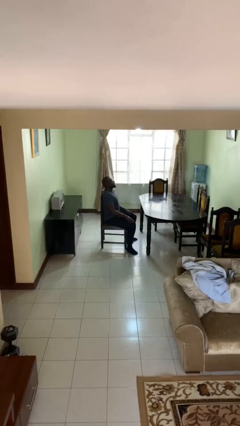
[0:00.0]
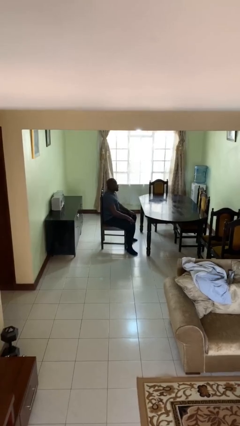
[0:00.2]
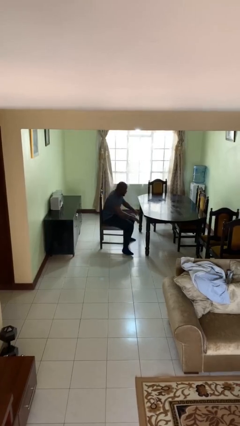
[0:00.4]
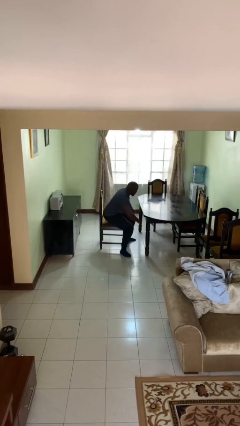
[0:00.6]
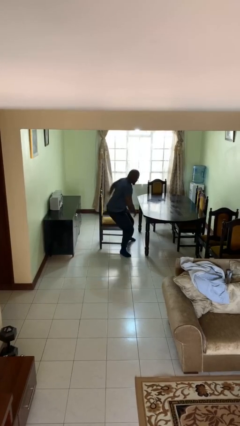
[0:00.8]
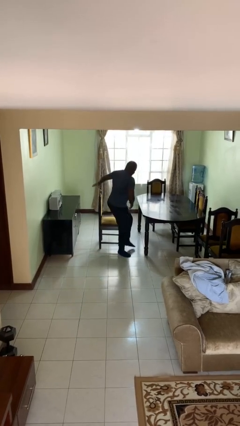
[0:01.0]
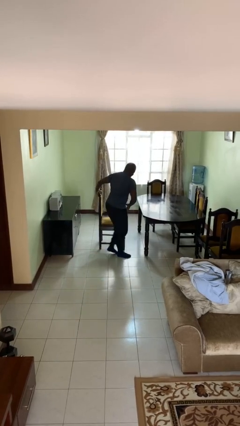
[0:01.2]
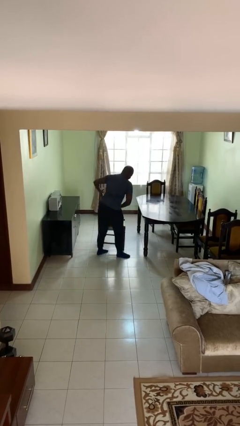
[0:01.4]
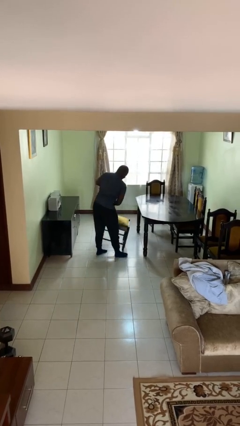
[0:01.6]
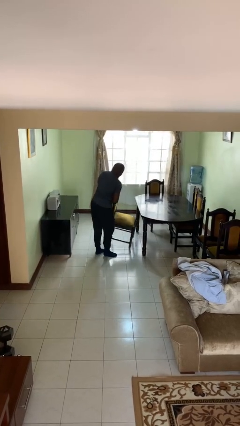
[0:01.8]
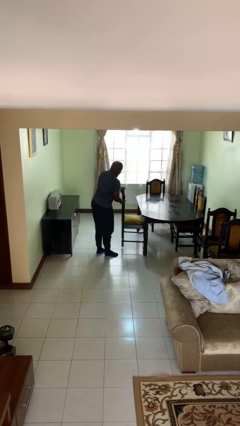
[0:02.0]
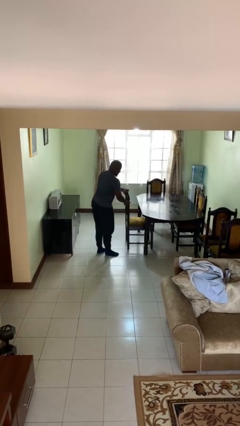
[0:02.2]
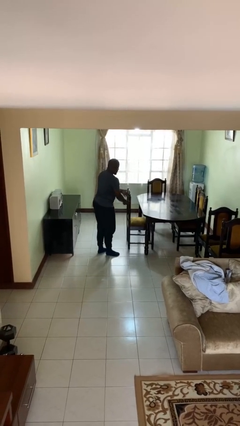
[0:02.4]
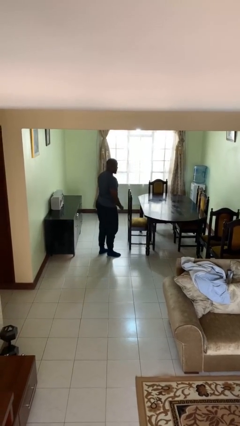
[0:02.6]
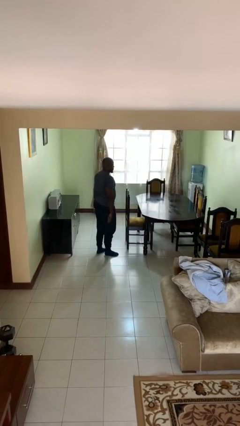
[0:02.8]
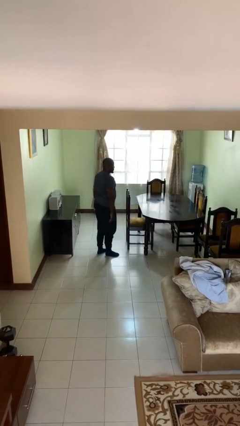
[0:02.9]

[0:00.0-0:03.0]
person stands up

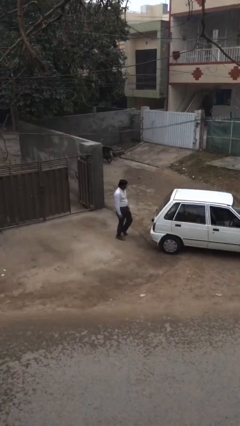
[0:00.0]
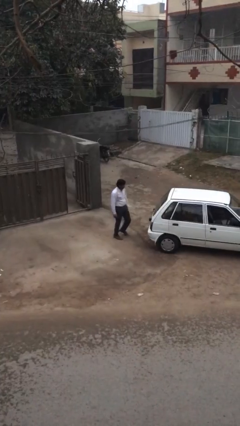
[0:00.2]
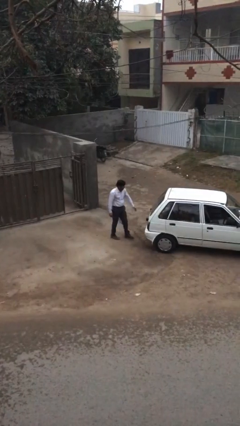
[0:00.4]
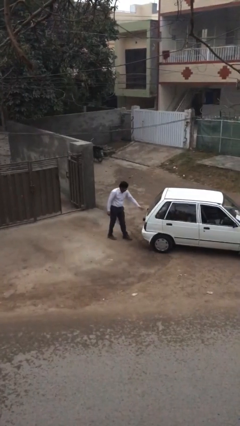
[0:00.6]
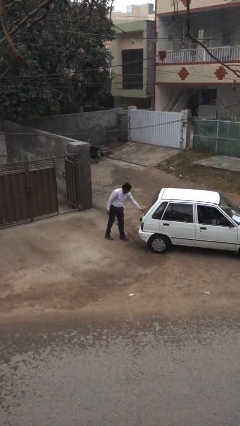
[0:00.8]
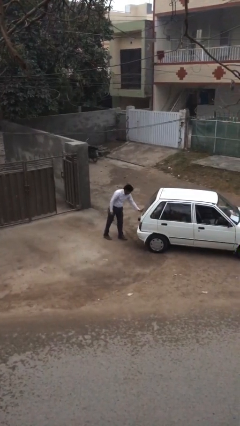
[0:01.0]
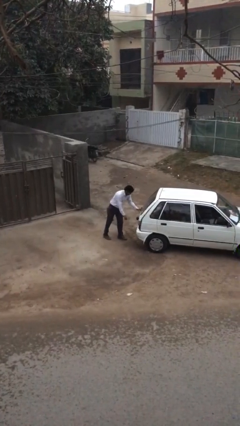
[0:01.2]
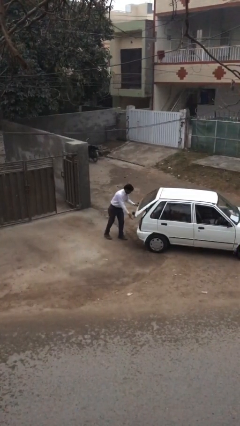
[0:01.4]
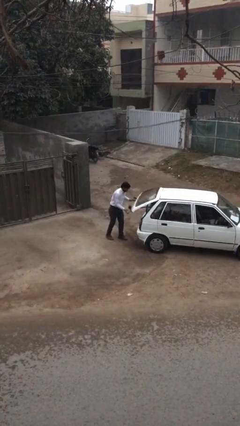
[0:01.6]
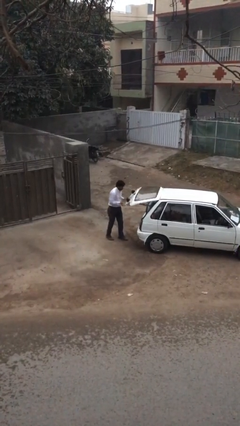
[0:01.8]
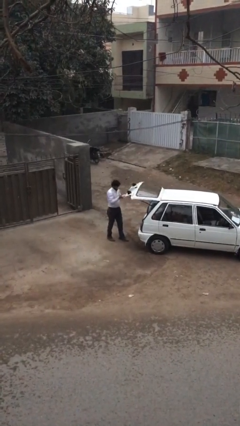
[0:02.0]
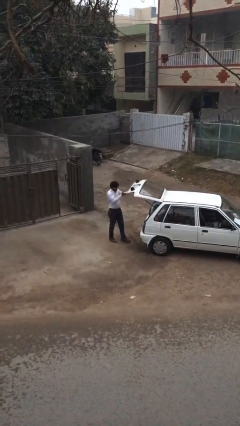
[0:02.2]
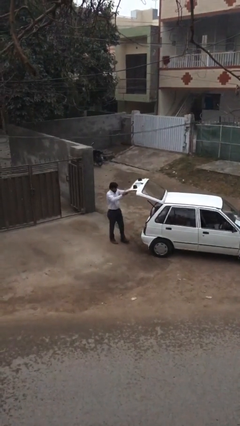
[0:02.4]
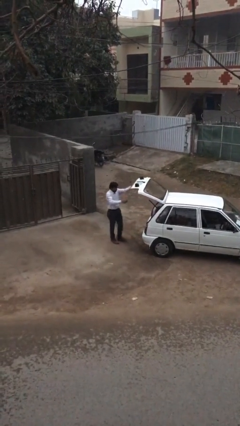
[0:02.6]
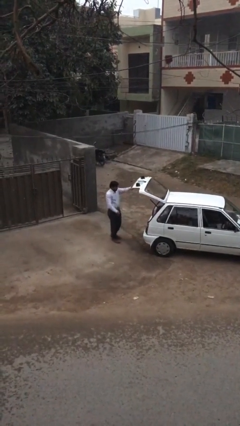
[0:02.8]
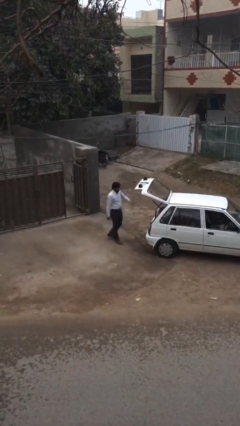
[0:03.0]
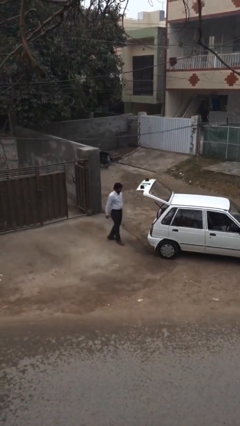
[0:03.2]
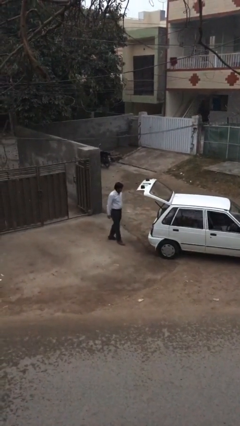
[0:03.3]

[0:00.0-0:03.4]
person opens car trunk

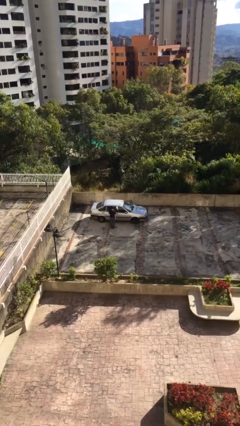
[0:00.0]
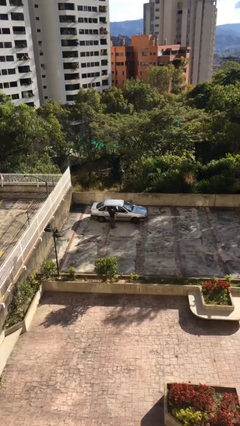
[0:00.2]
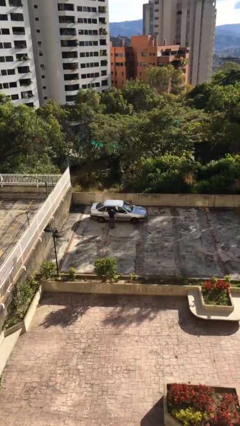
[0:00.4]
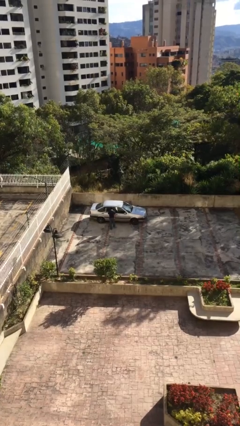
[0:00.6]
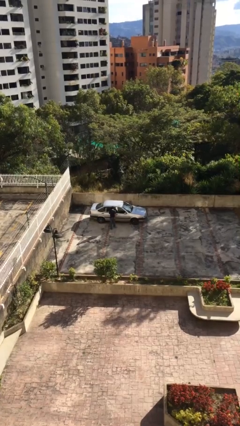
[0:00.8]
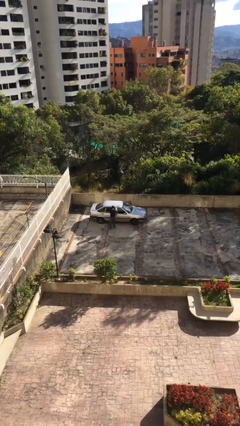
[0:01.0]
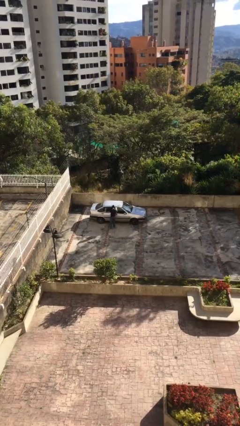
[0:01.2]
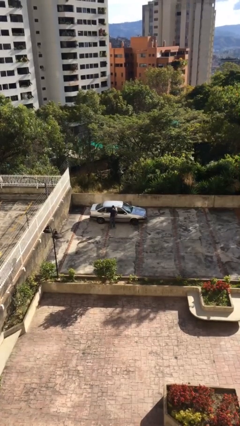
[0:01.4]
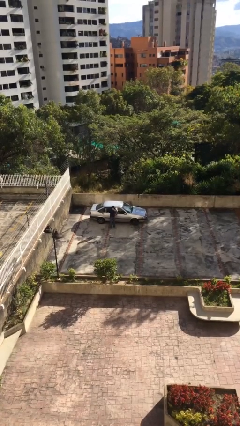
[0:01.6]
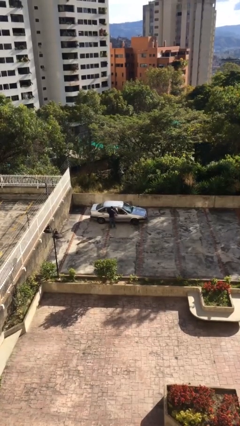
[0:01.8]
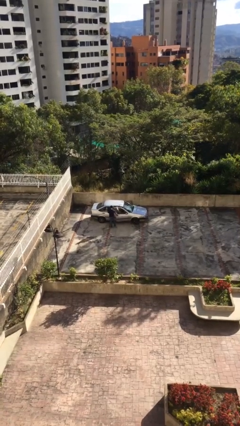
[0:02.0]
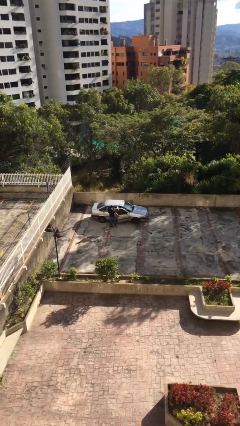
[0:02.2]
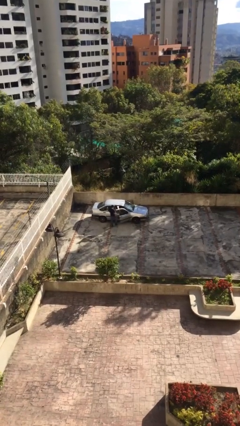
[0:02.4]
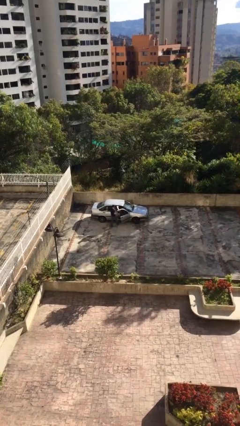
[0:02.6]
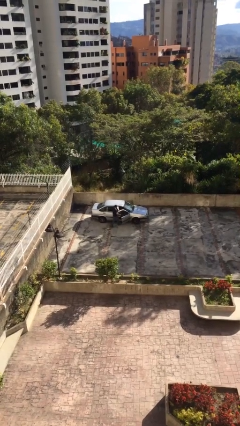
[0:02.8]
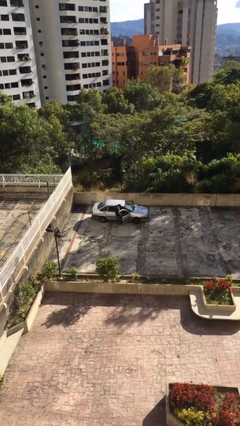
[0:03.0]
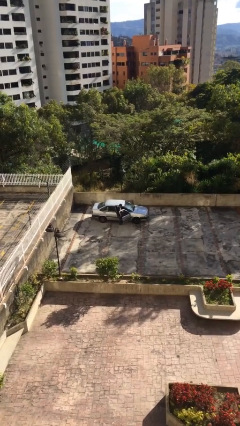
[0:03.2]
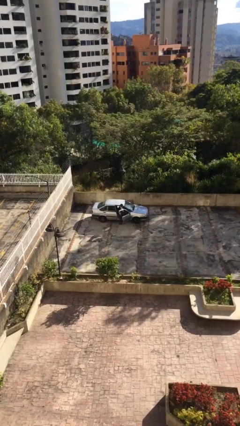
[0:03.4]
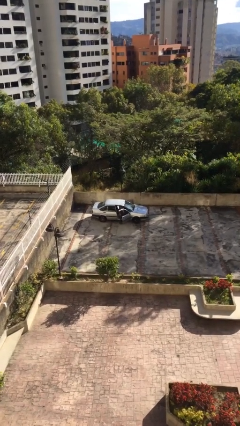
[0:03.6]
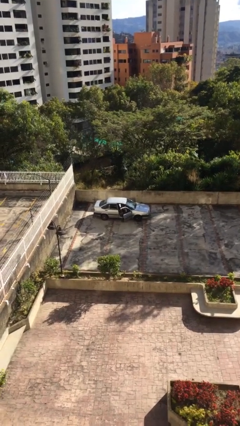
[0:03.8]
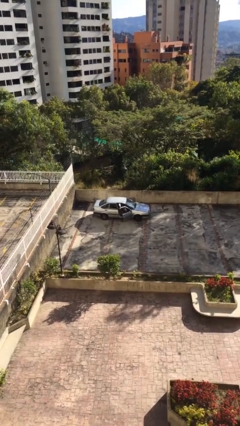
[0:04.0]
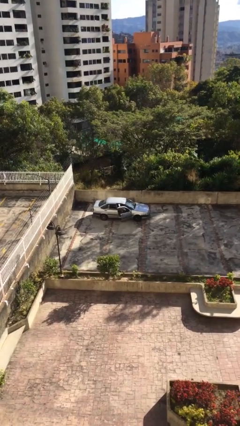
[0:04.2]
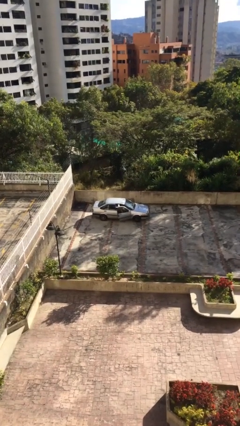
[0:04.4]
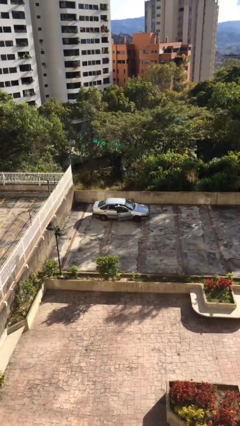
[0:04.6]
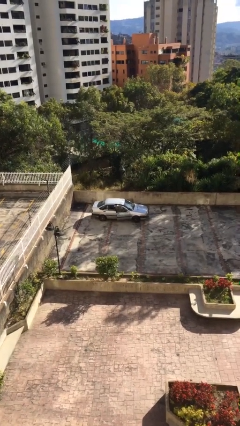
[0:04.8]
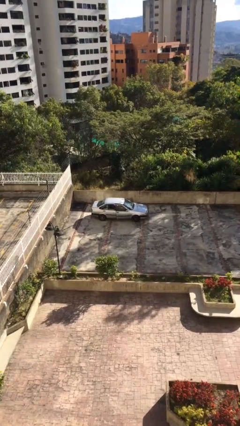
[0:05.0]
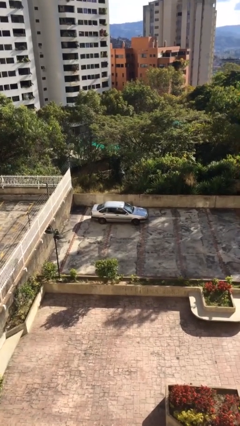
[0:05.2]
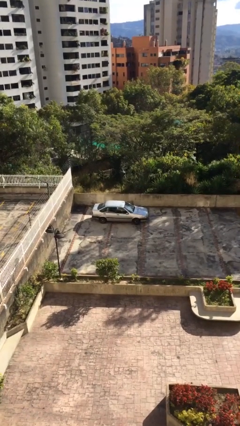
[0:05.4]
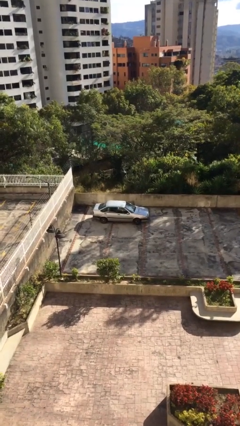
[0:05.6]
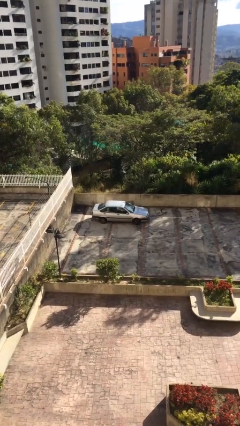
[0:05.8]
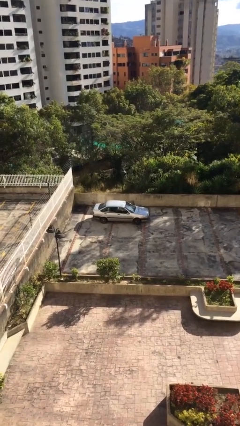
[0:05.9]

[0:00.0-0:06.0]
car picks up person

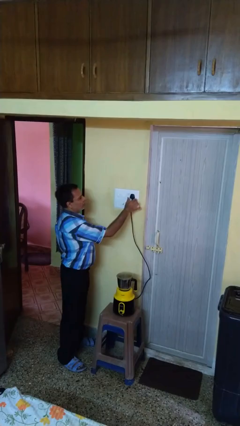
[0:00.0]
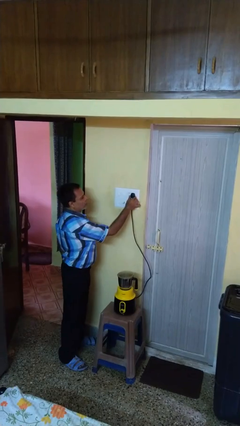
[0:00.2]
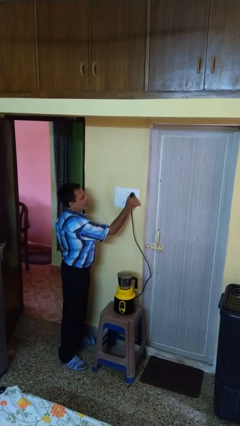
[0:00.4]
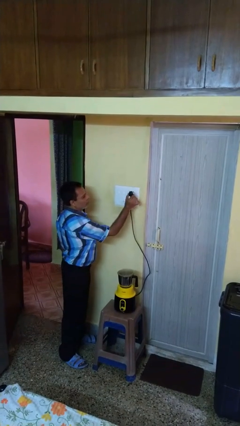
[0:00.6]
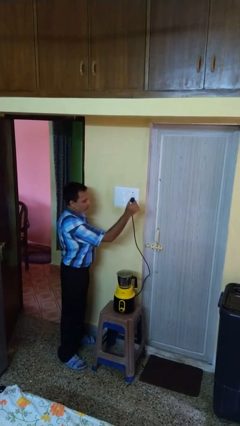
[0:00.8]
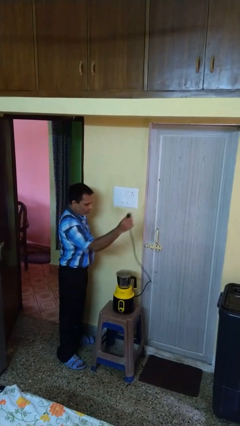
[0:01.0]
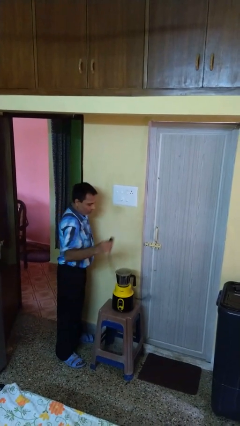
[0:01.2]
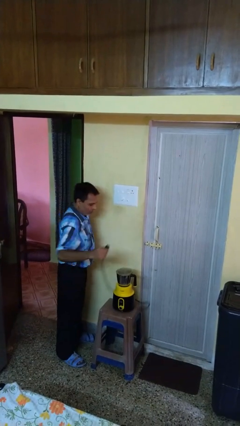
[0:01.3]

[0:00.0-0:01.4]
person unplugs from electrical socket

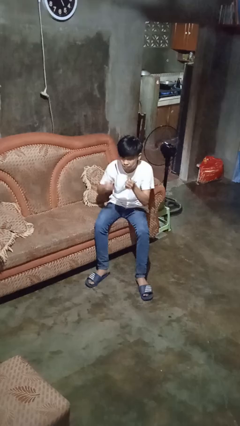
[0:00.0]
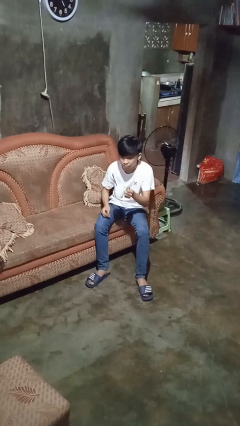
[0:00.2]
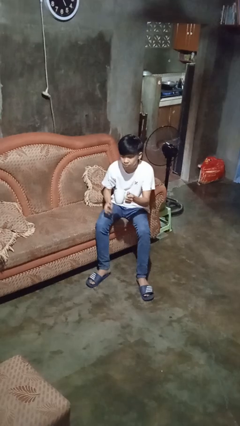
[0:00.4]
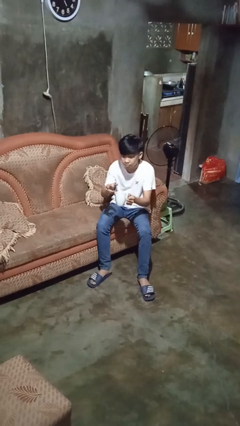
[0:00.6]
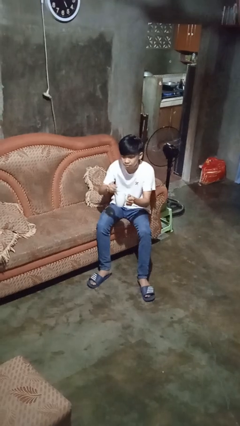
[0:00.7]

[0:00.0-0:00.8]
person stirs mug

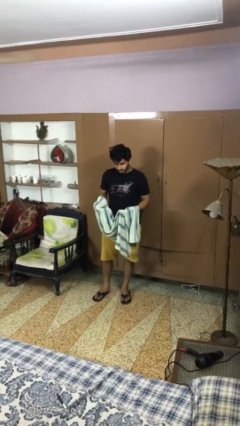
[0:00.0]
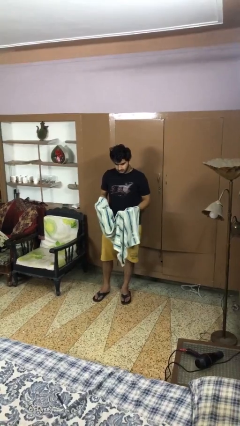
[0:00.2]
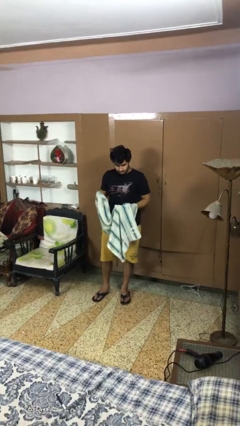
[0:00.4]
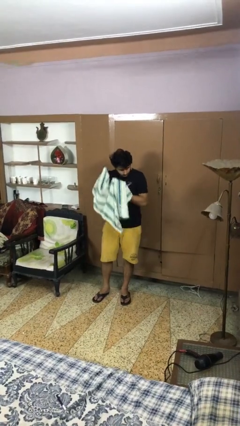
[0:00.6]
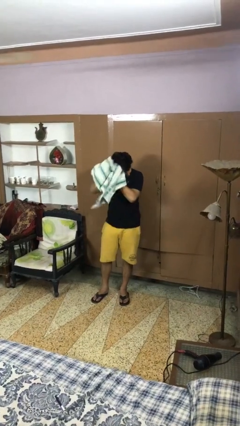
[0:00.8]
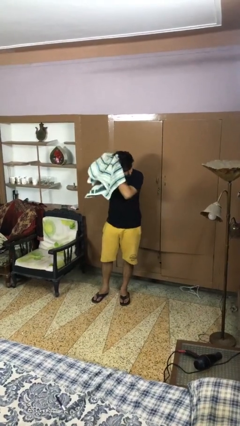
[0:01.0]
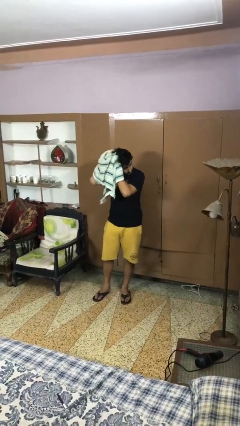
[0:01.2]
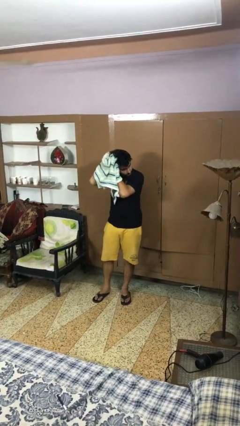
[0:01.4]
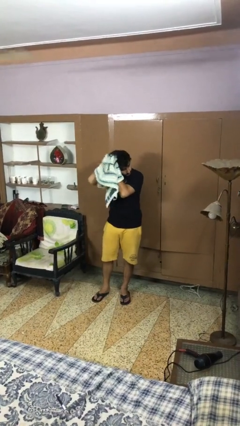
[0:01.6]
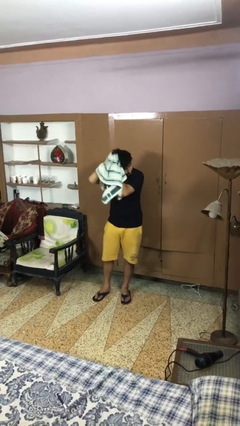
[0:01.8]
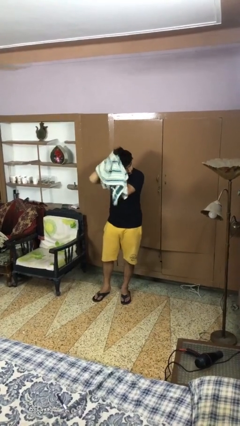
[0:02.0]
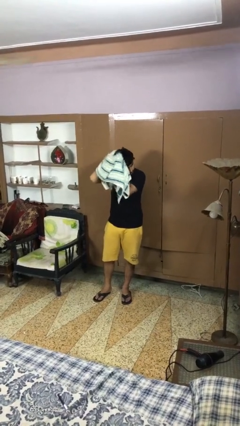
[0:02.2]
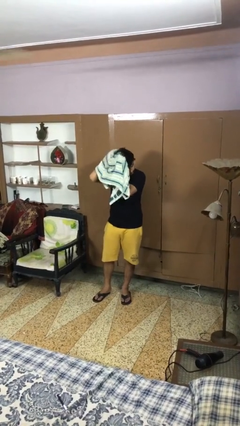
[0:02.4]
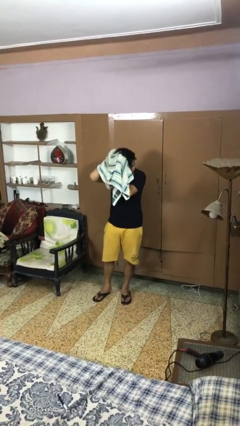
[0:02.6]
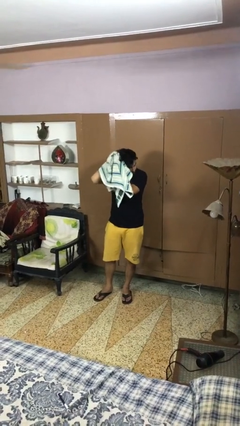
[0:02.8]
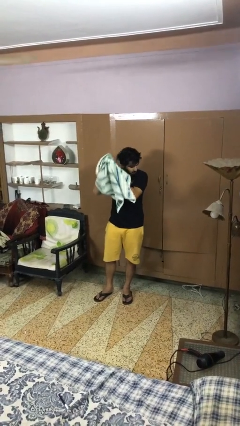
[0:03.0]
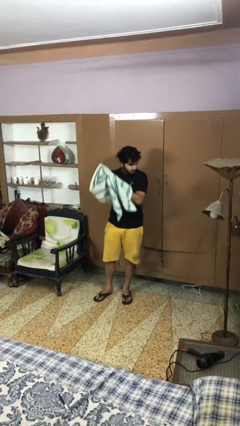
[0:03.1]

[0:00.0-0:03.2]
person dries hair with towel
